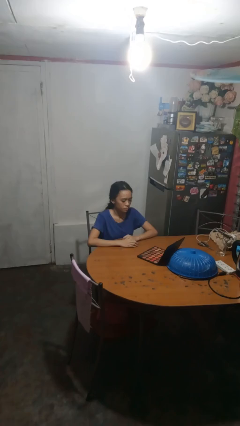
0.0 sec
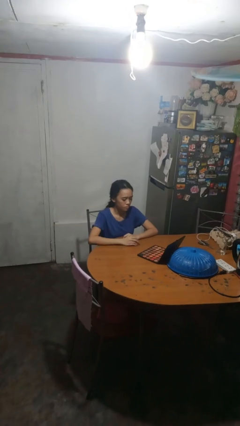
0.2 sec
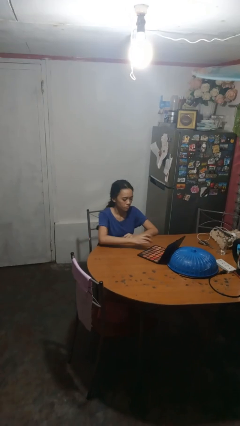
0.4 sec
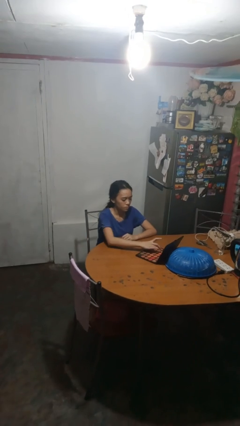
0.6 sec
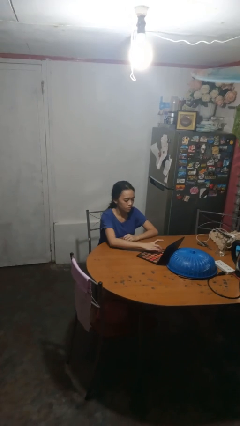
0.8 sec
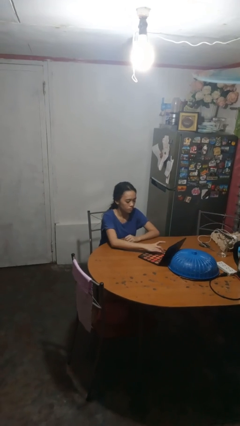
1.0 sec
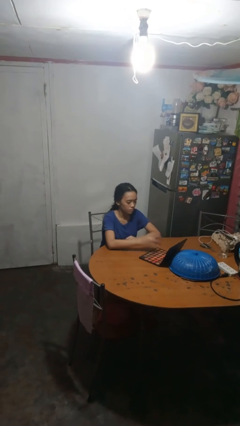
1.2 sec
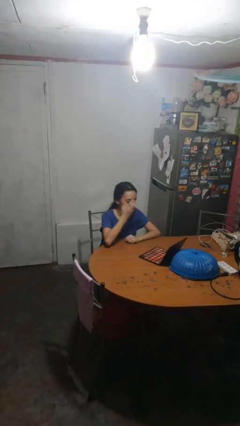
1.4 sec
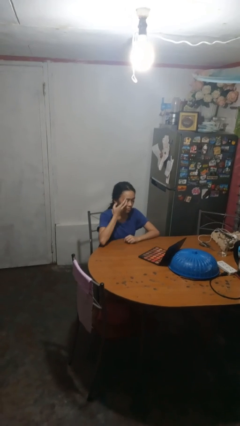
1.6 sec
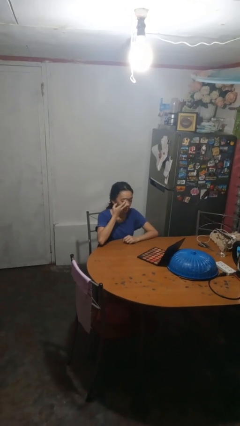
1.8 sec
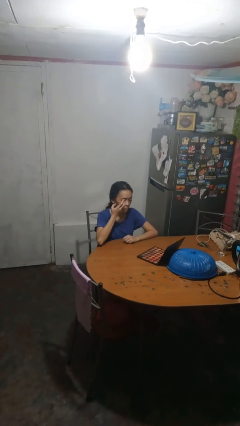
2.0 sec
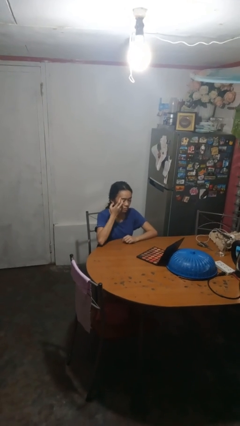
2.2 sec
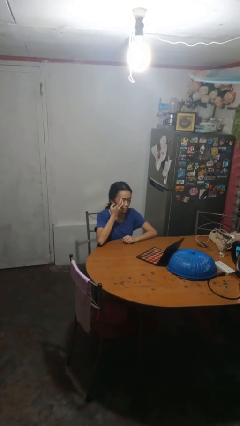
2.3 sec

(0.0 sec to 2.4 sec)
person applies eye makeup

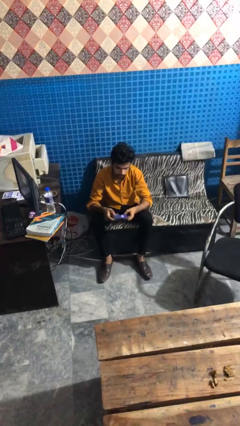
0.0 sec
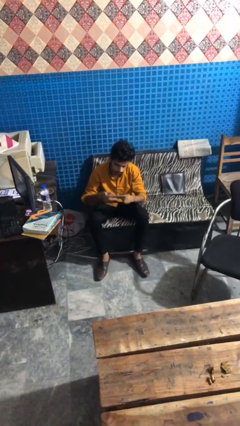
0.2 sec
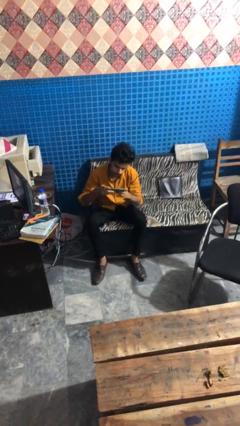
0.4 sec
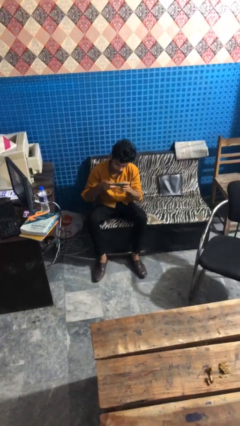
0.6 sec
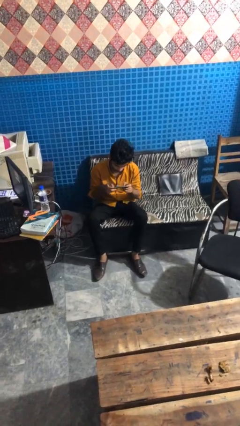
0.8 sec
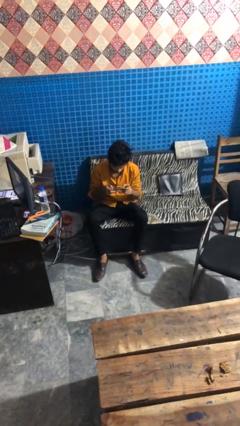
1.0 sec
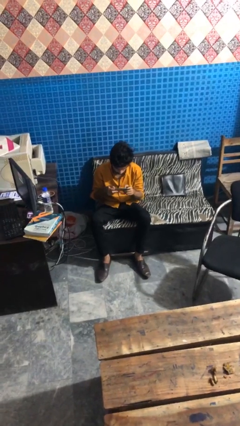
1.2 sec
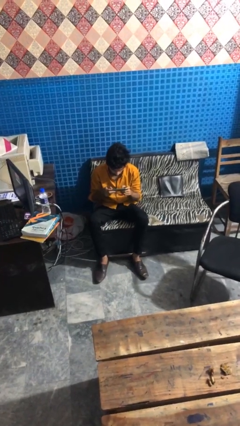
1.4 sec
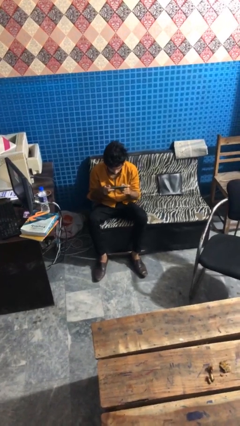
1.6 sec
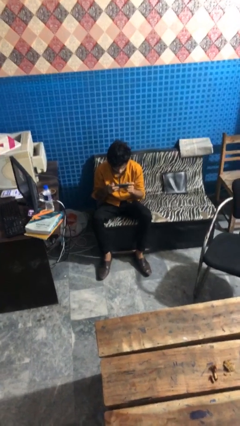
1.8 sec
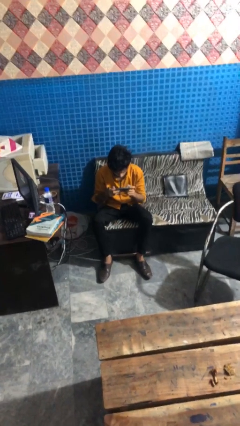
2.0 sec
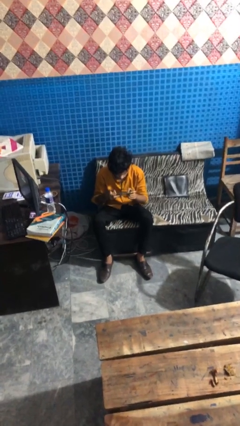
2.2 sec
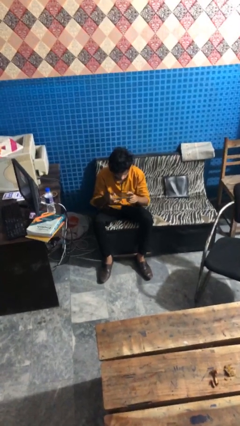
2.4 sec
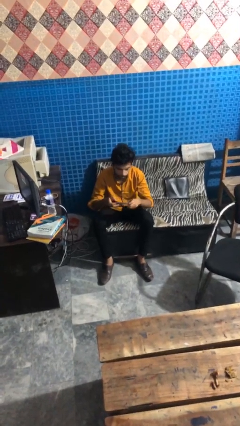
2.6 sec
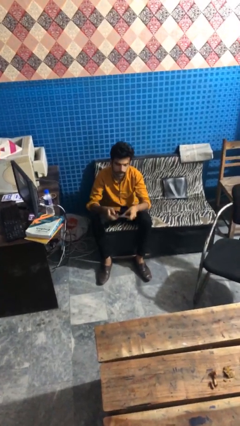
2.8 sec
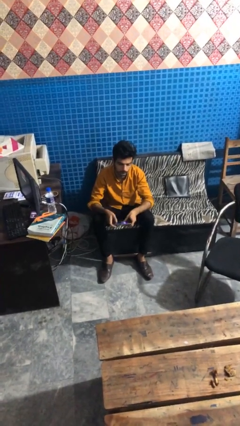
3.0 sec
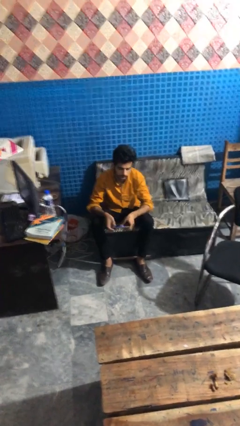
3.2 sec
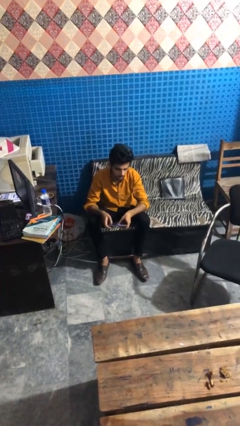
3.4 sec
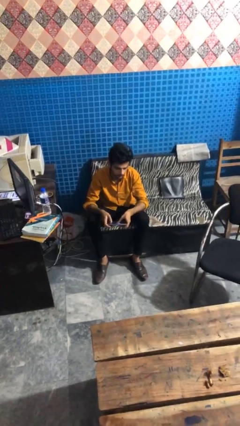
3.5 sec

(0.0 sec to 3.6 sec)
person interacts with handheld game

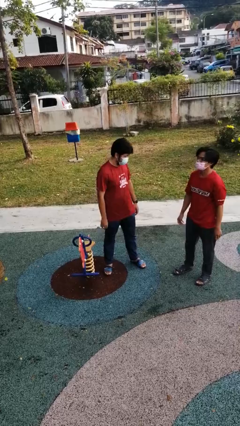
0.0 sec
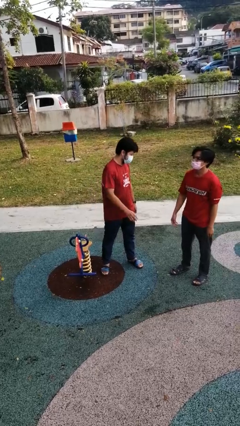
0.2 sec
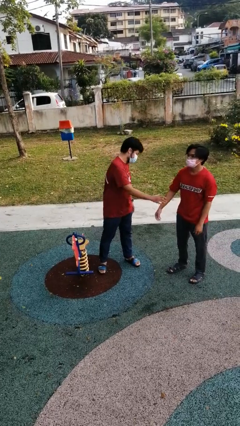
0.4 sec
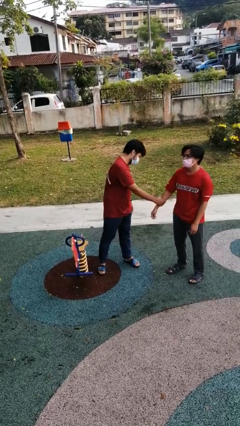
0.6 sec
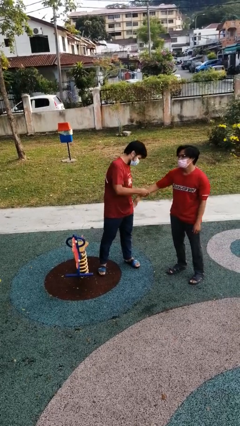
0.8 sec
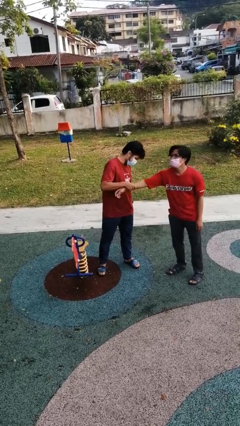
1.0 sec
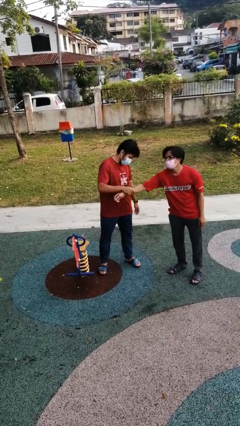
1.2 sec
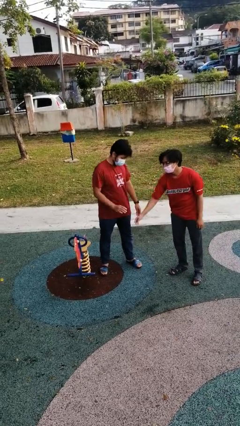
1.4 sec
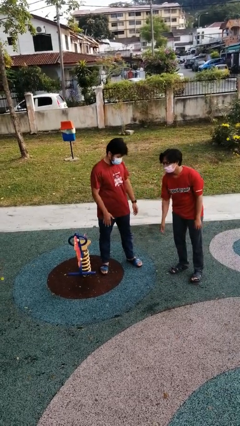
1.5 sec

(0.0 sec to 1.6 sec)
person grabs person by forearm

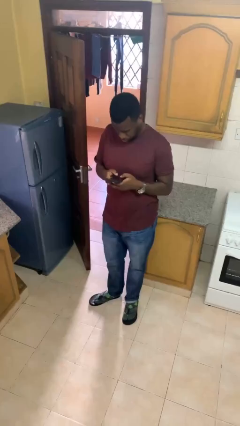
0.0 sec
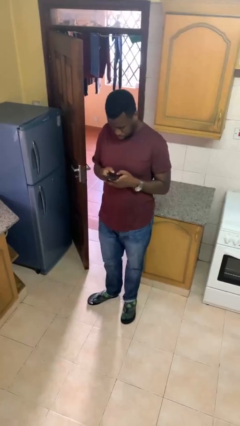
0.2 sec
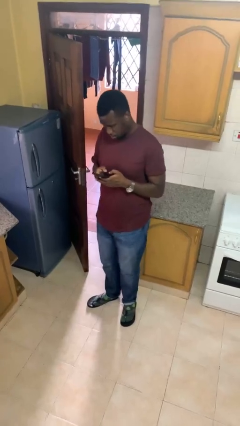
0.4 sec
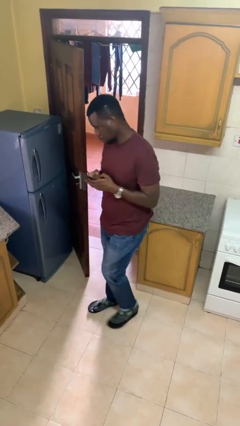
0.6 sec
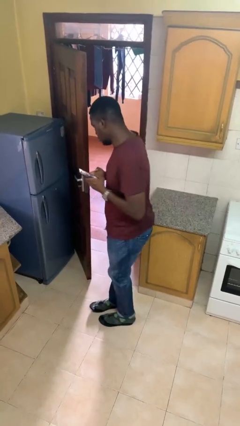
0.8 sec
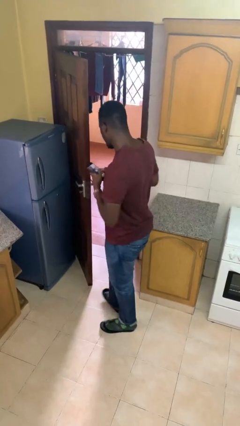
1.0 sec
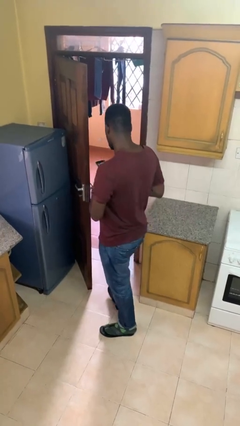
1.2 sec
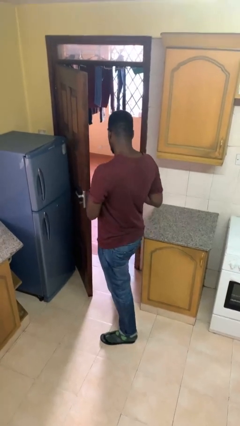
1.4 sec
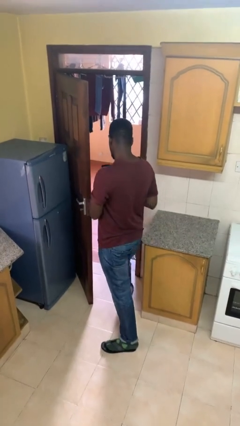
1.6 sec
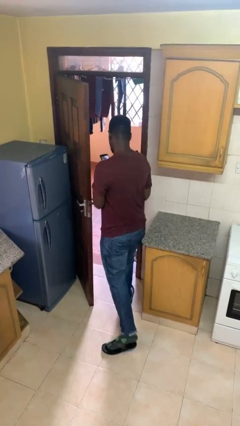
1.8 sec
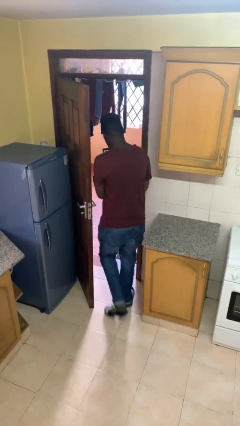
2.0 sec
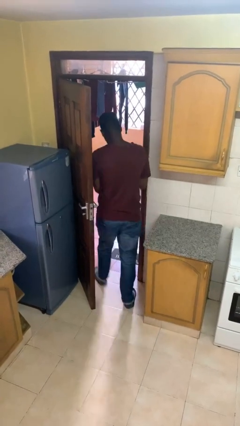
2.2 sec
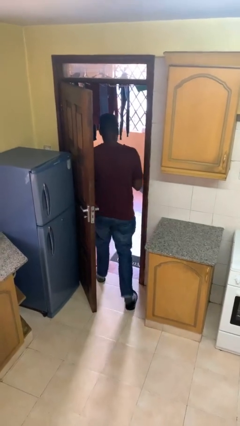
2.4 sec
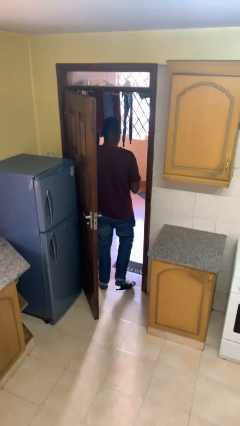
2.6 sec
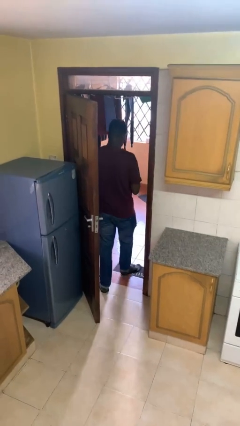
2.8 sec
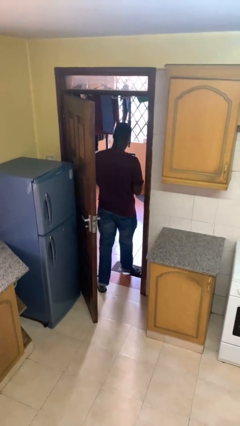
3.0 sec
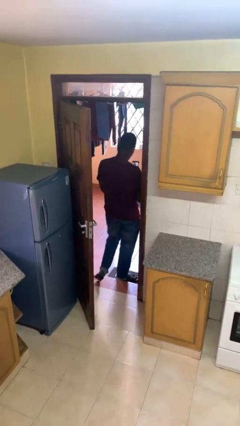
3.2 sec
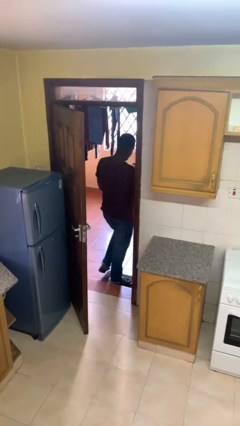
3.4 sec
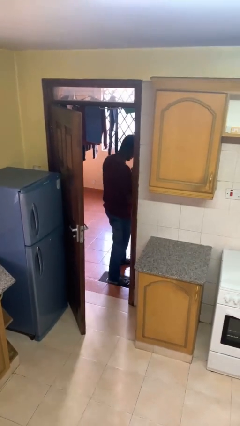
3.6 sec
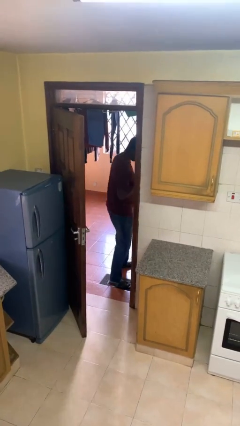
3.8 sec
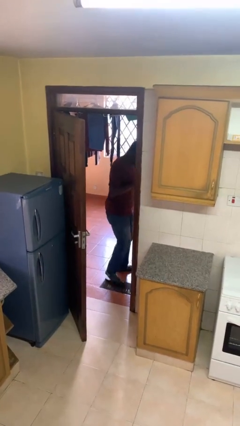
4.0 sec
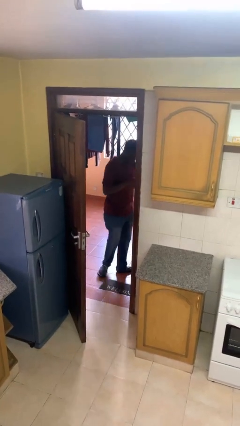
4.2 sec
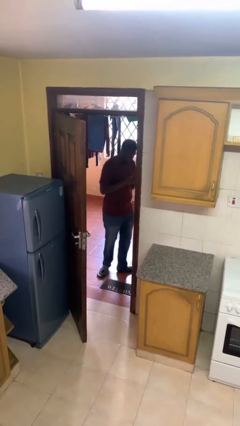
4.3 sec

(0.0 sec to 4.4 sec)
person exits scene through structure

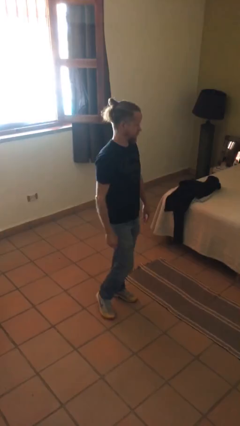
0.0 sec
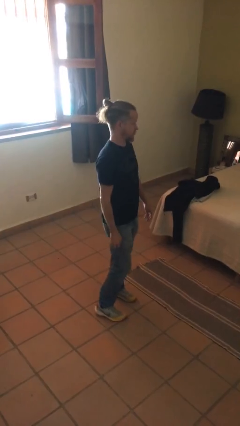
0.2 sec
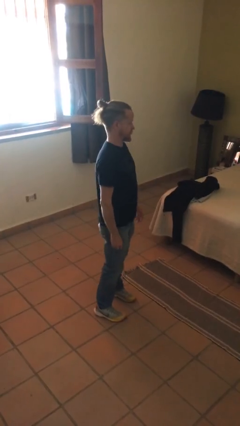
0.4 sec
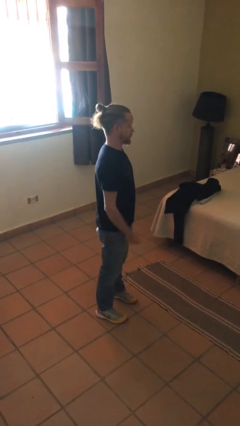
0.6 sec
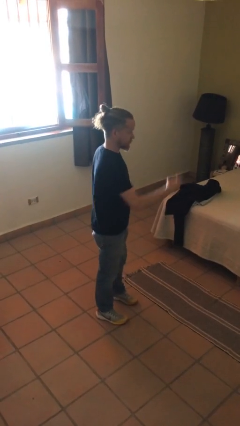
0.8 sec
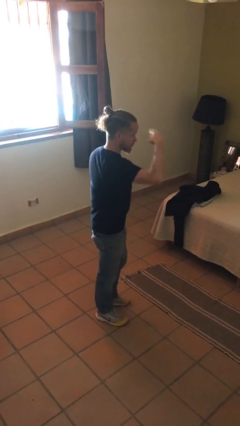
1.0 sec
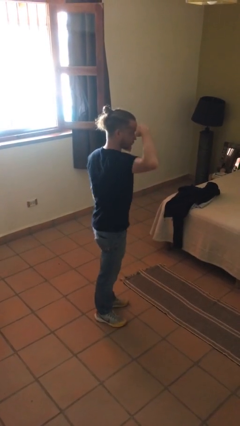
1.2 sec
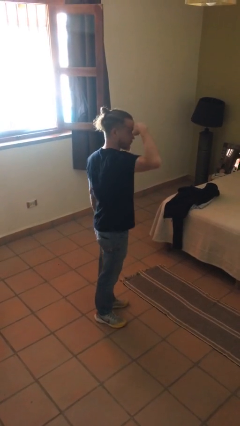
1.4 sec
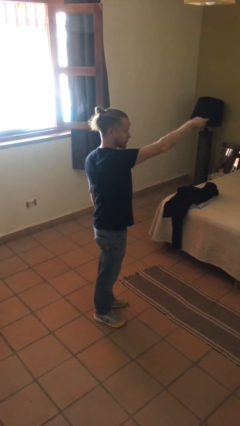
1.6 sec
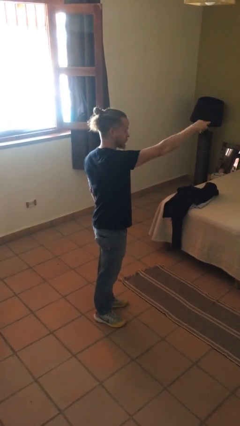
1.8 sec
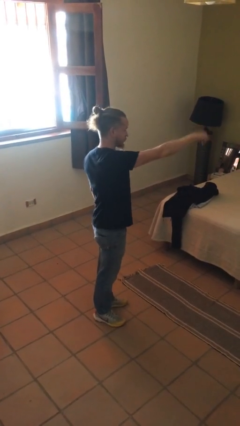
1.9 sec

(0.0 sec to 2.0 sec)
person salutes

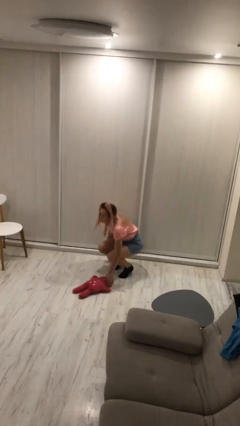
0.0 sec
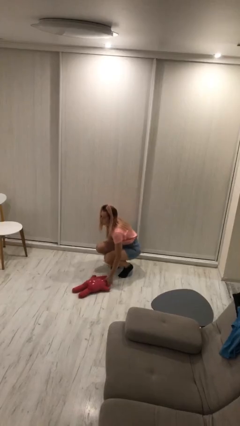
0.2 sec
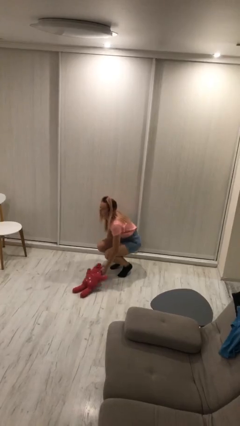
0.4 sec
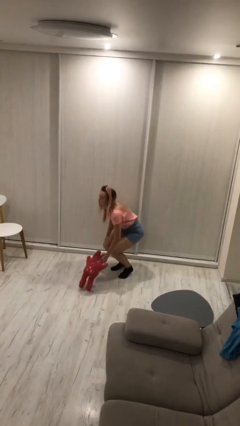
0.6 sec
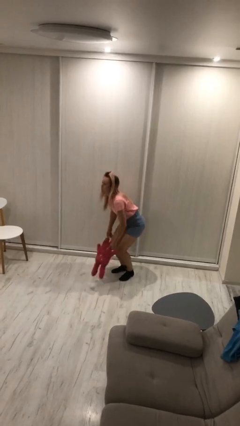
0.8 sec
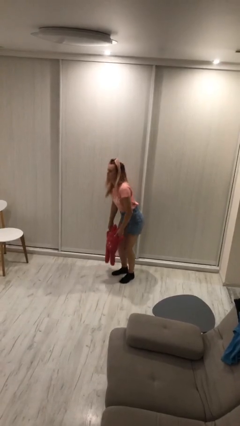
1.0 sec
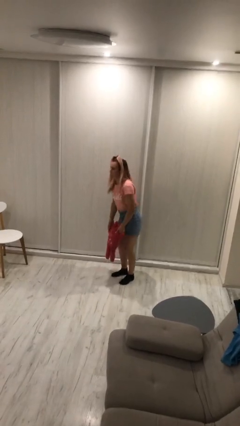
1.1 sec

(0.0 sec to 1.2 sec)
person picks up object from floor

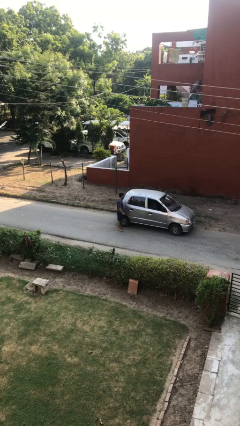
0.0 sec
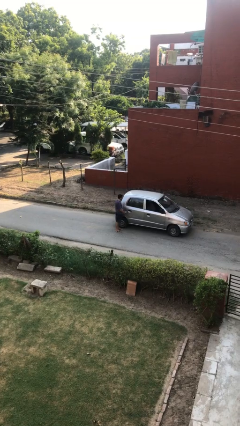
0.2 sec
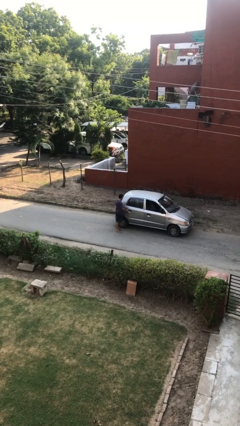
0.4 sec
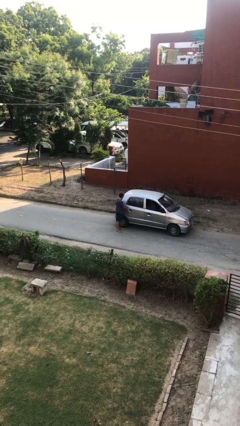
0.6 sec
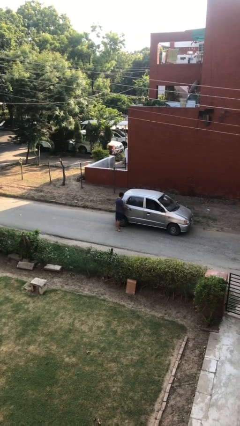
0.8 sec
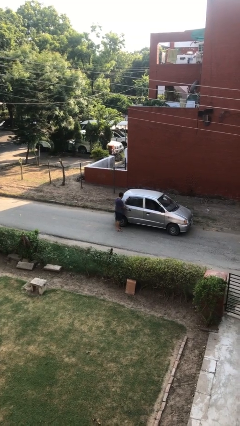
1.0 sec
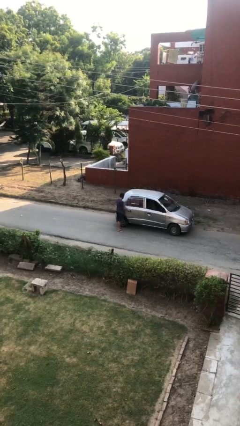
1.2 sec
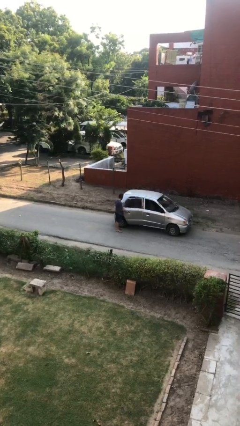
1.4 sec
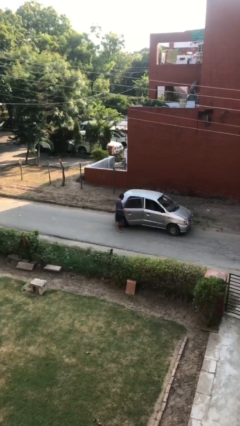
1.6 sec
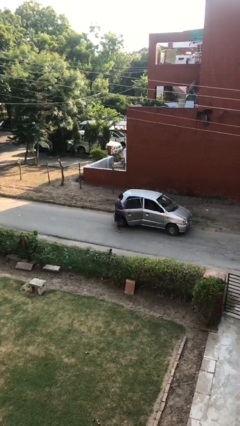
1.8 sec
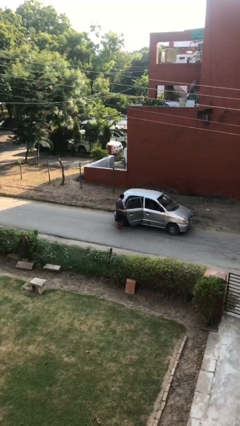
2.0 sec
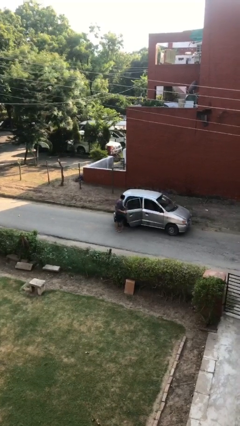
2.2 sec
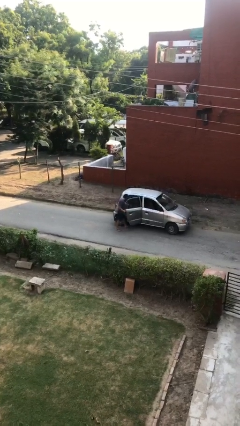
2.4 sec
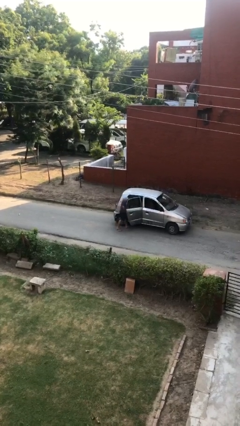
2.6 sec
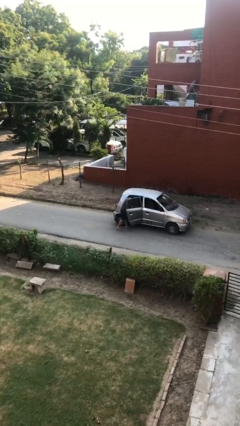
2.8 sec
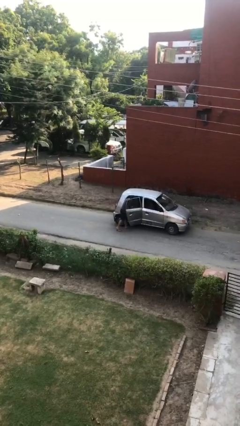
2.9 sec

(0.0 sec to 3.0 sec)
person opens car door
